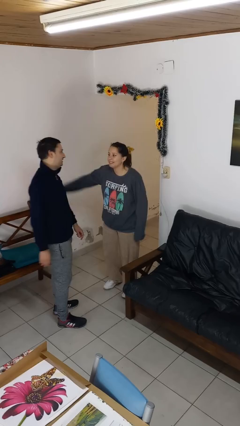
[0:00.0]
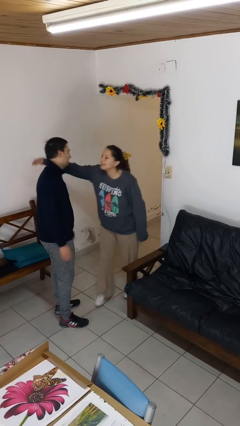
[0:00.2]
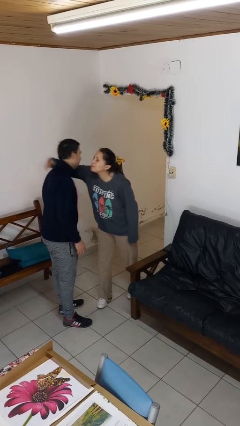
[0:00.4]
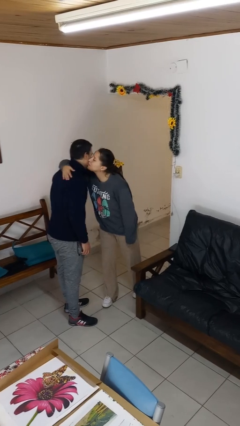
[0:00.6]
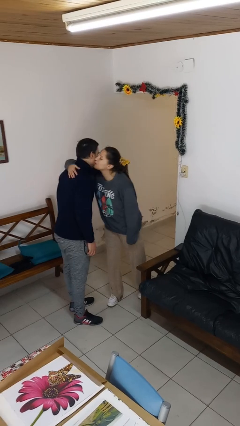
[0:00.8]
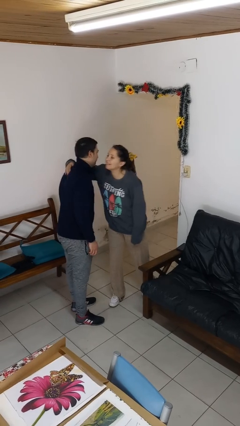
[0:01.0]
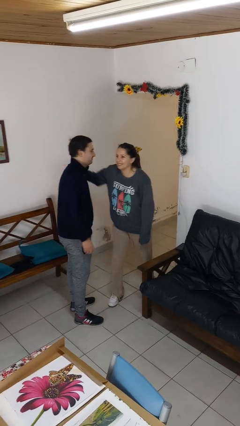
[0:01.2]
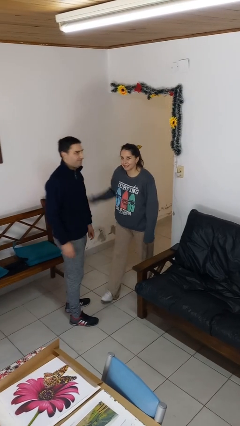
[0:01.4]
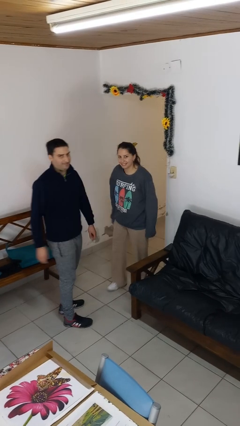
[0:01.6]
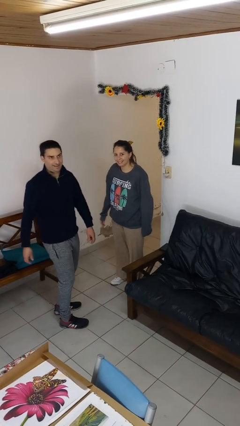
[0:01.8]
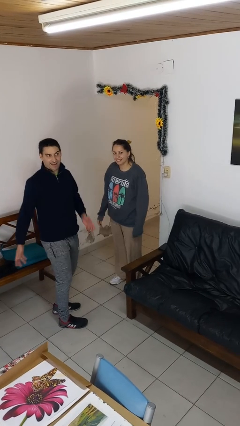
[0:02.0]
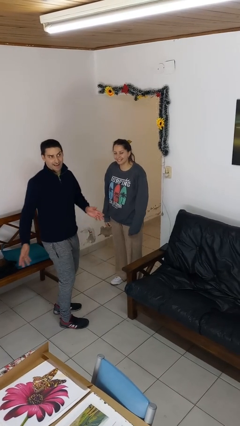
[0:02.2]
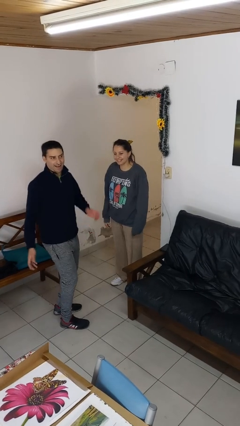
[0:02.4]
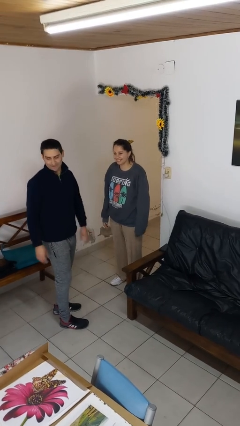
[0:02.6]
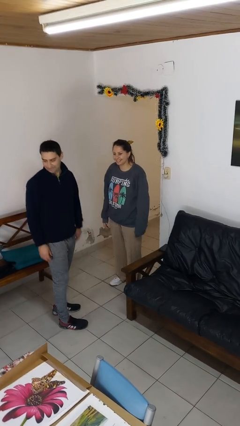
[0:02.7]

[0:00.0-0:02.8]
person kisses cheek of person

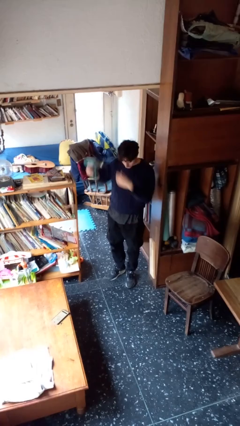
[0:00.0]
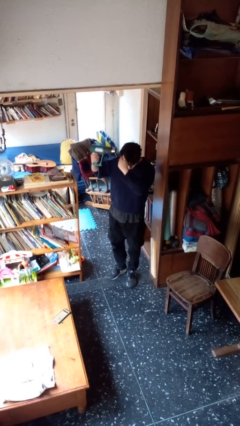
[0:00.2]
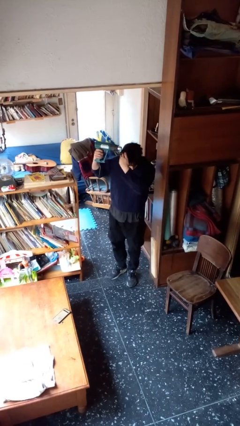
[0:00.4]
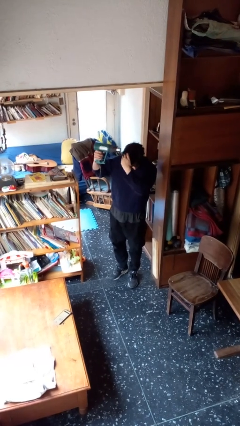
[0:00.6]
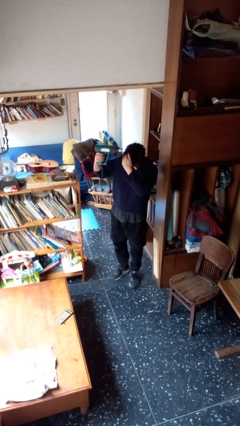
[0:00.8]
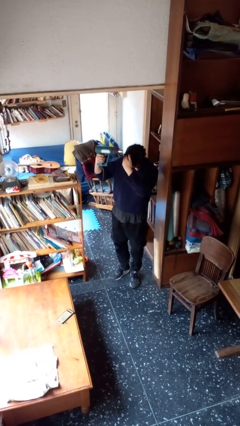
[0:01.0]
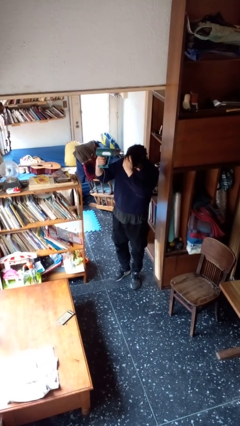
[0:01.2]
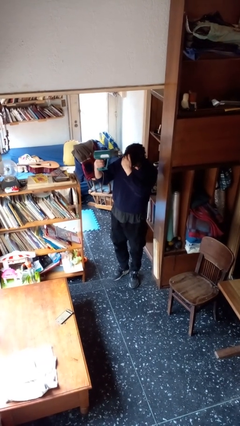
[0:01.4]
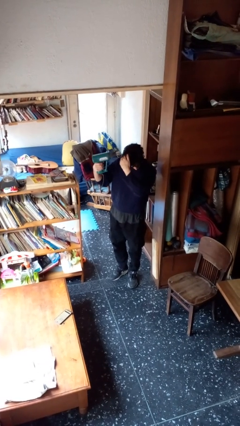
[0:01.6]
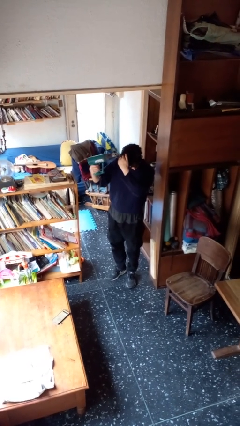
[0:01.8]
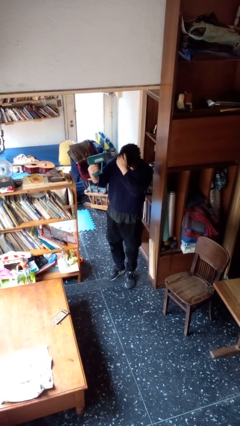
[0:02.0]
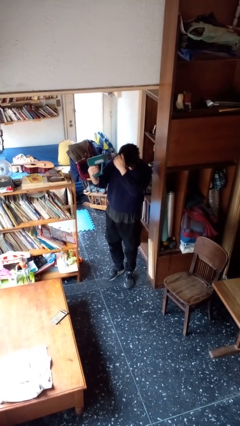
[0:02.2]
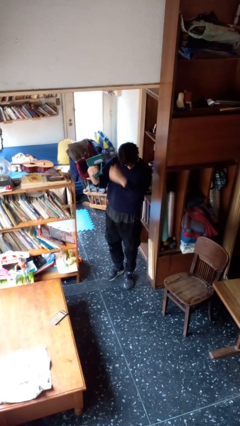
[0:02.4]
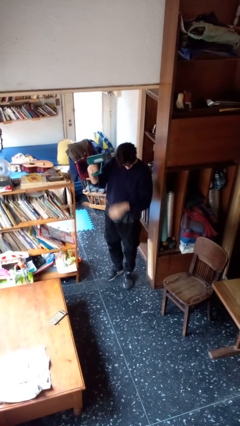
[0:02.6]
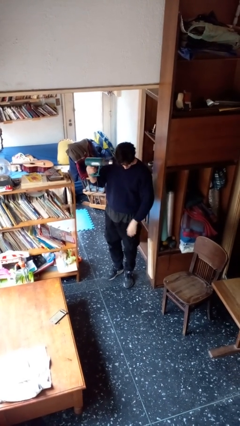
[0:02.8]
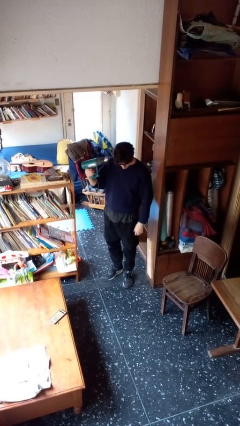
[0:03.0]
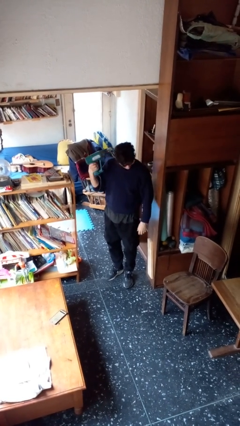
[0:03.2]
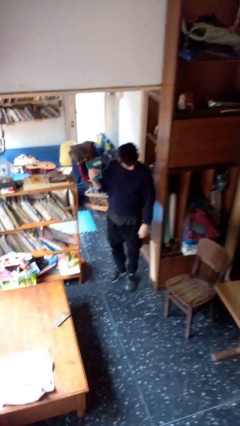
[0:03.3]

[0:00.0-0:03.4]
person dries hair with hairdryer

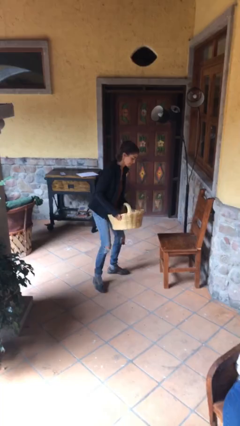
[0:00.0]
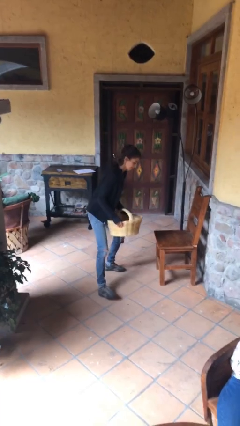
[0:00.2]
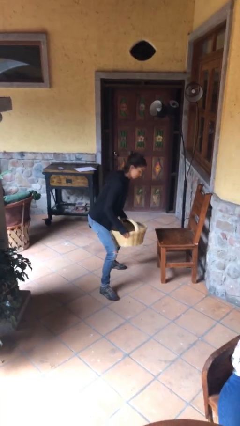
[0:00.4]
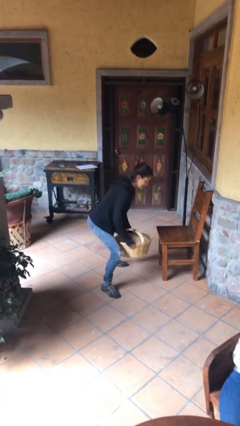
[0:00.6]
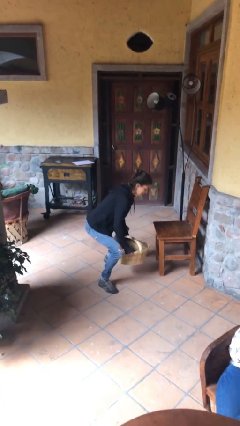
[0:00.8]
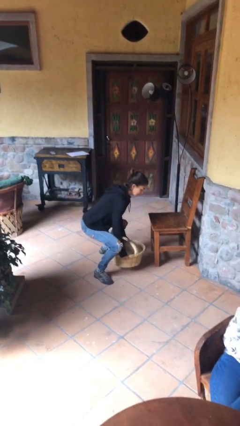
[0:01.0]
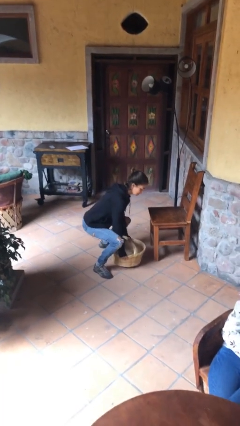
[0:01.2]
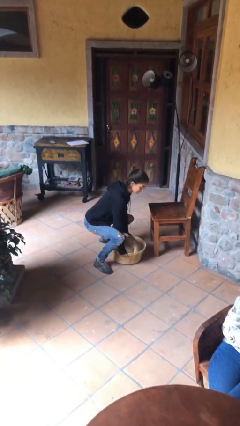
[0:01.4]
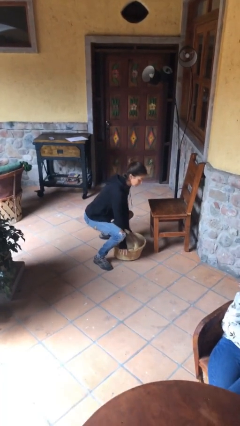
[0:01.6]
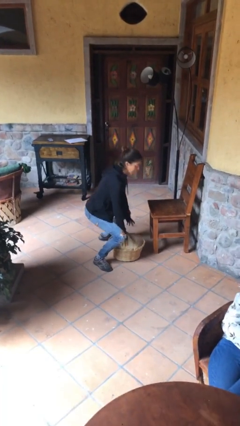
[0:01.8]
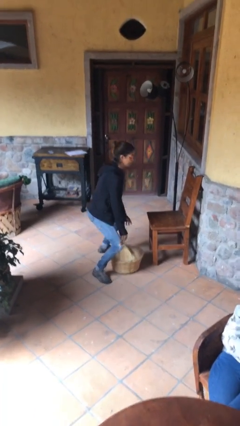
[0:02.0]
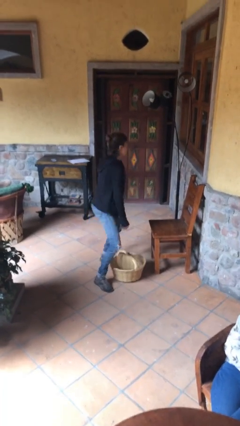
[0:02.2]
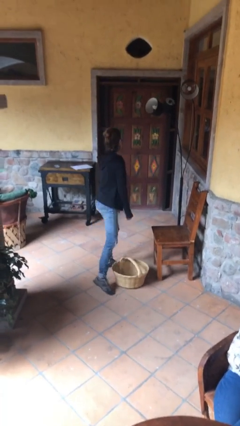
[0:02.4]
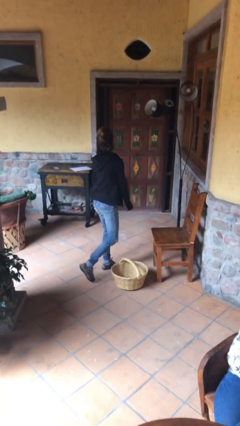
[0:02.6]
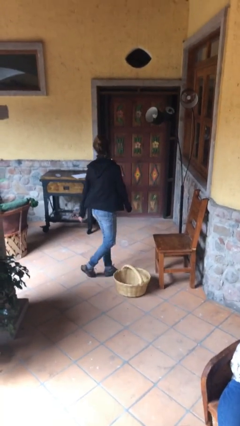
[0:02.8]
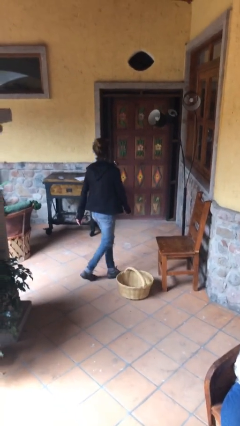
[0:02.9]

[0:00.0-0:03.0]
person puts down object on floor

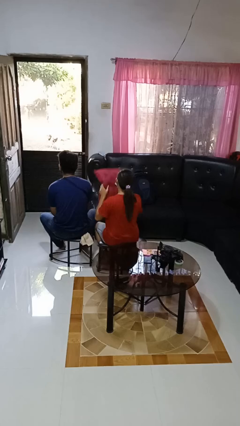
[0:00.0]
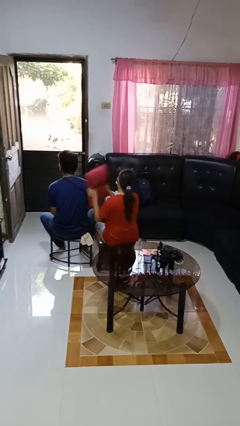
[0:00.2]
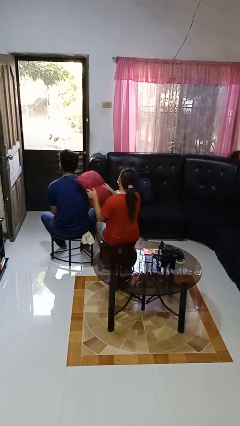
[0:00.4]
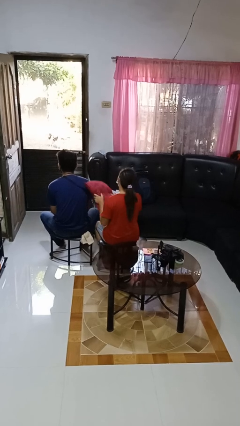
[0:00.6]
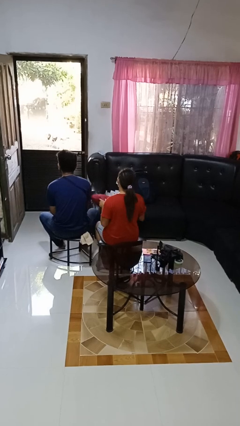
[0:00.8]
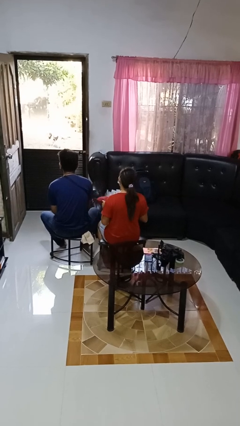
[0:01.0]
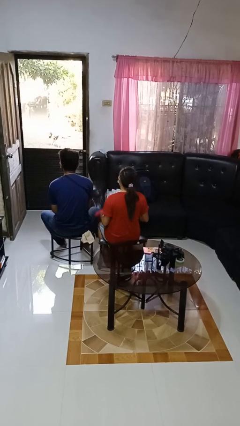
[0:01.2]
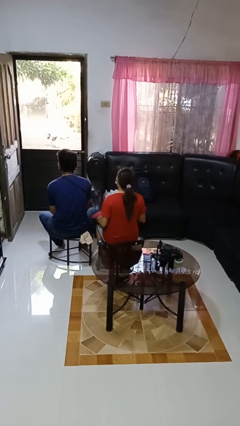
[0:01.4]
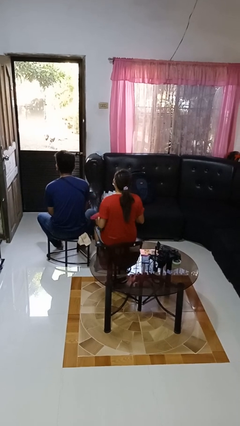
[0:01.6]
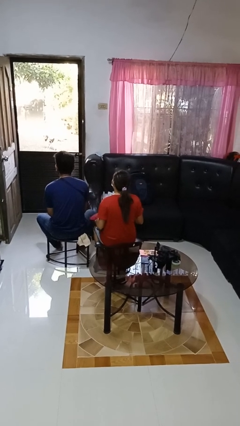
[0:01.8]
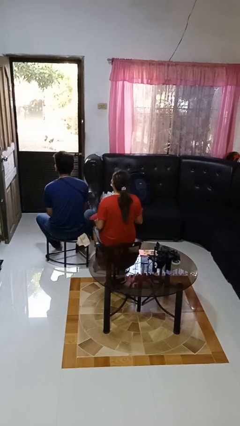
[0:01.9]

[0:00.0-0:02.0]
person hits person with pillow

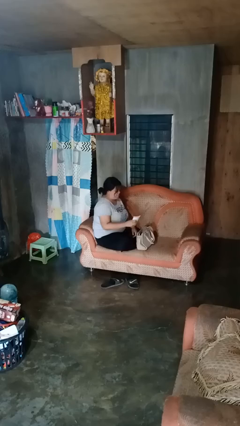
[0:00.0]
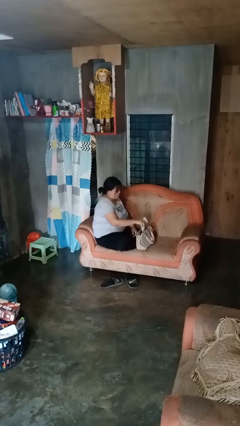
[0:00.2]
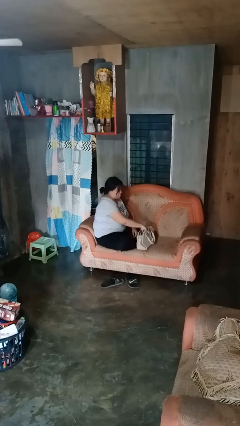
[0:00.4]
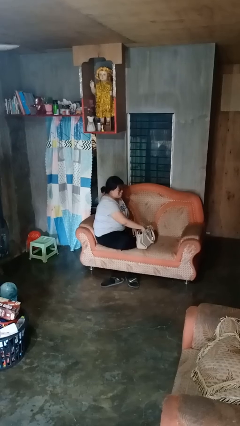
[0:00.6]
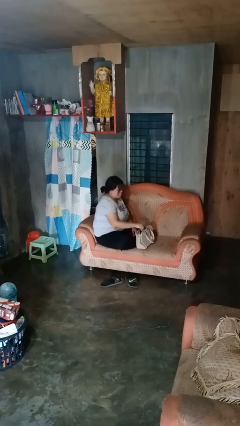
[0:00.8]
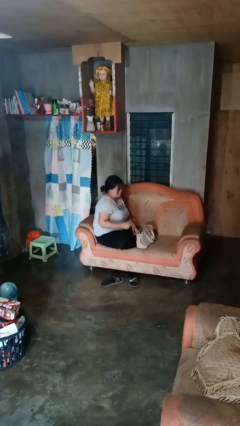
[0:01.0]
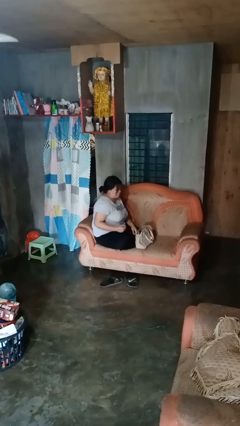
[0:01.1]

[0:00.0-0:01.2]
person puts object into purse

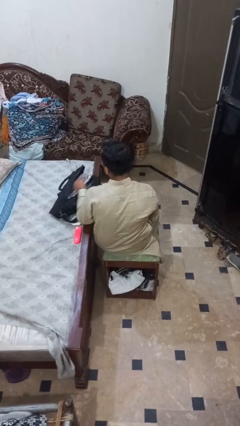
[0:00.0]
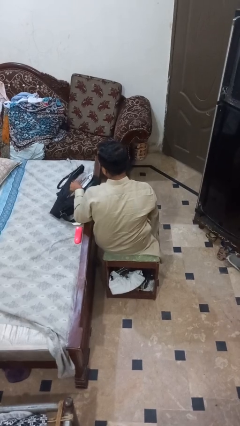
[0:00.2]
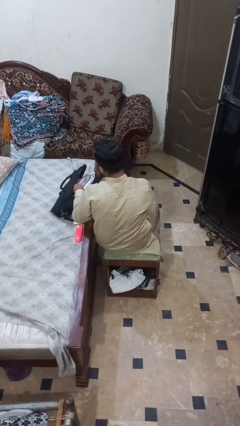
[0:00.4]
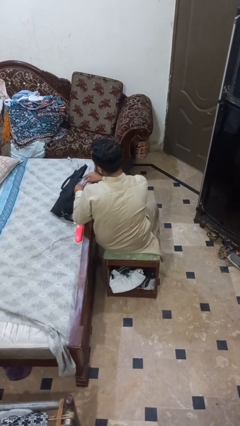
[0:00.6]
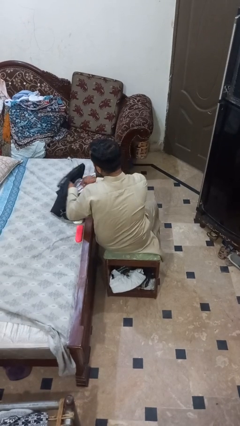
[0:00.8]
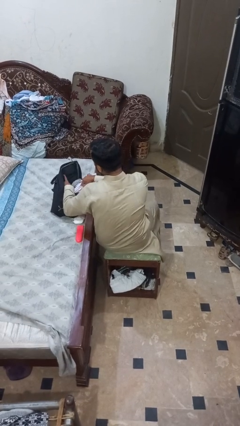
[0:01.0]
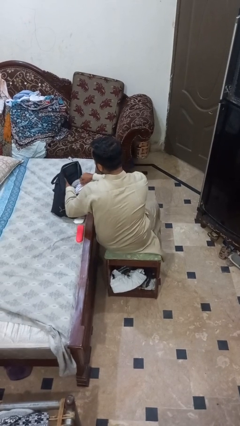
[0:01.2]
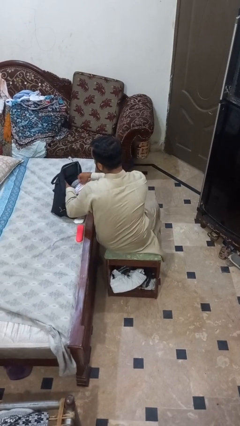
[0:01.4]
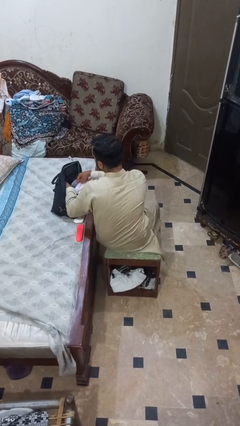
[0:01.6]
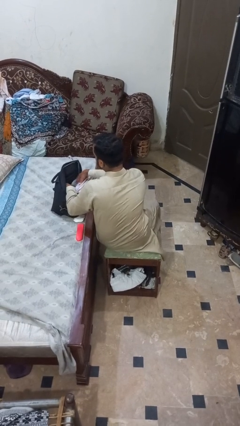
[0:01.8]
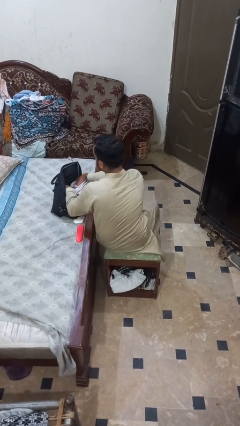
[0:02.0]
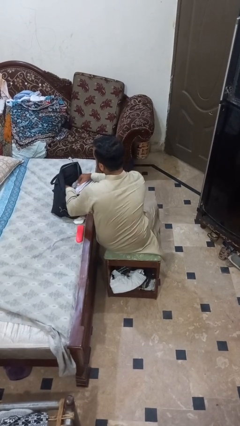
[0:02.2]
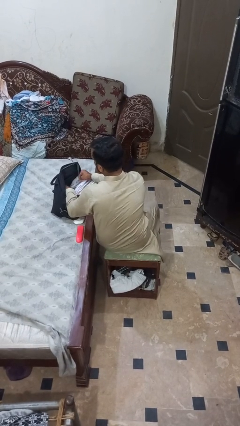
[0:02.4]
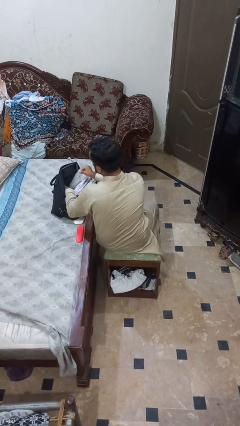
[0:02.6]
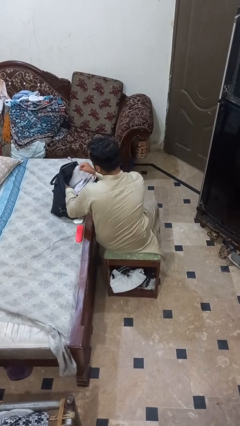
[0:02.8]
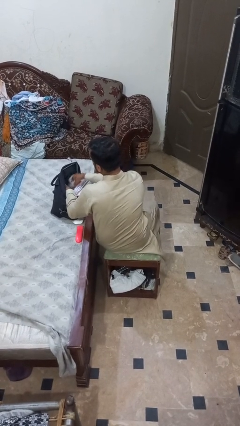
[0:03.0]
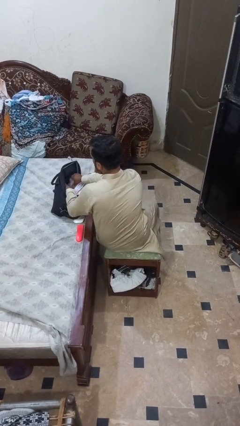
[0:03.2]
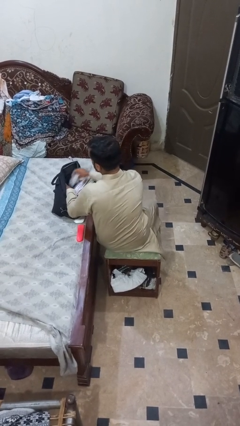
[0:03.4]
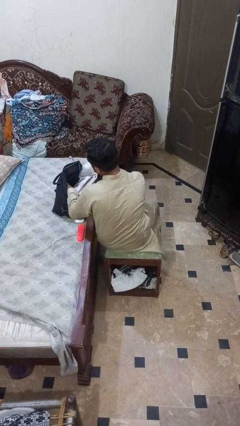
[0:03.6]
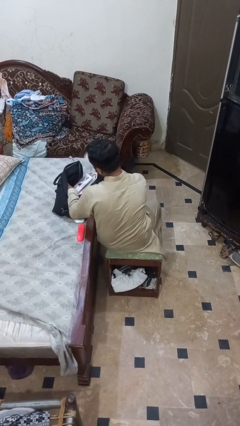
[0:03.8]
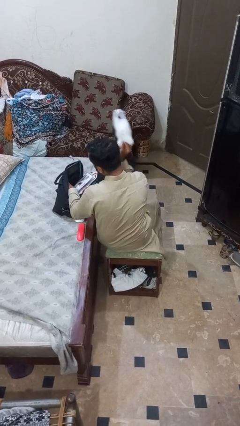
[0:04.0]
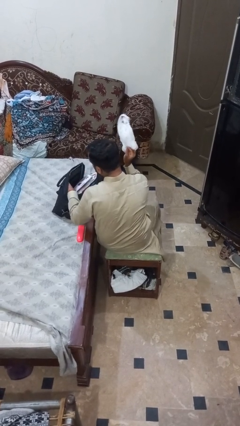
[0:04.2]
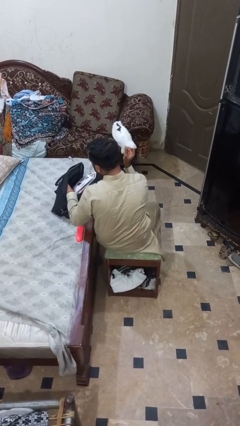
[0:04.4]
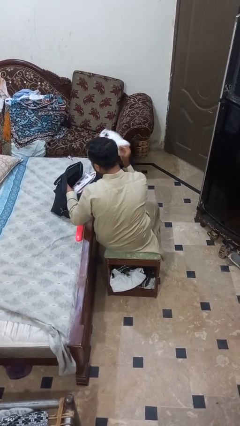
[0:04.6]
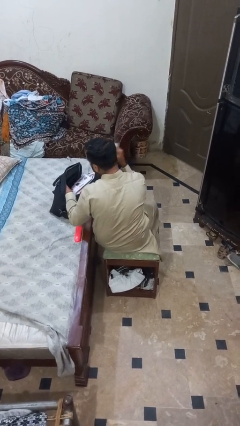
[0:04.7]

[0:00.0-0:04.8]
person searches in bag

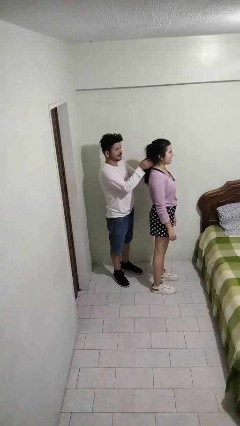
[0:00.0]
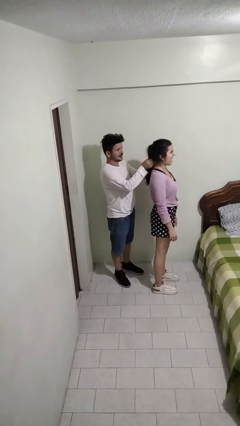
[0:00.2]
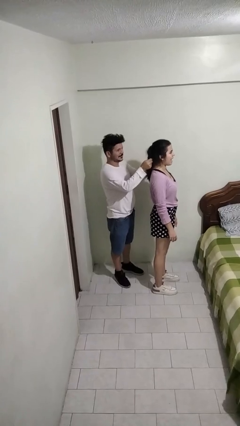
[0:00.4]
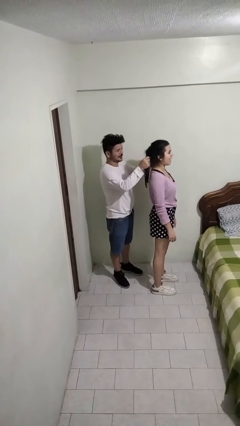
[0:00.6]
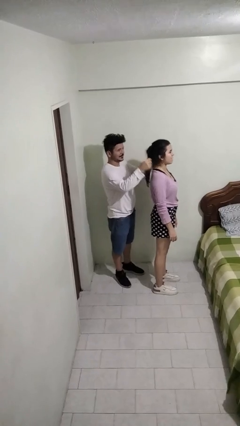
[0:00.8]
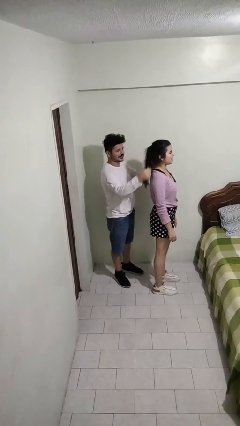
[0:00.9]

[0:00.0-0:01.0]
person grabs person by hair
